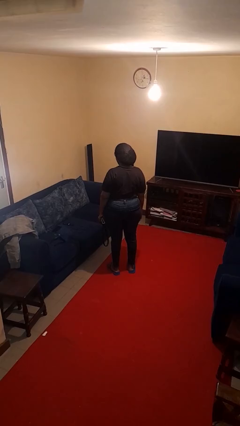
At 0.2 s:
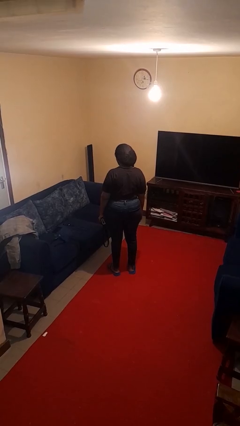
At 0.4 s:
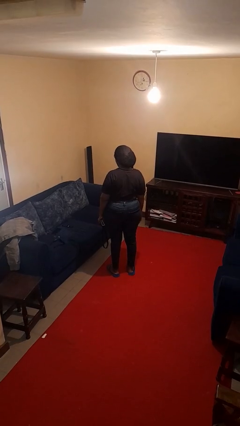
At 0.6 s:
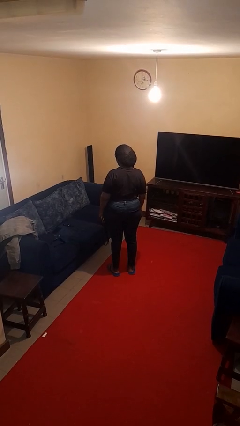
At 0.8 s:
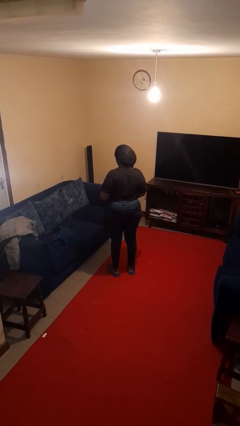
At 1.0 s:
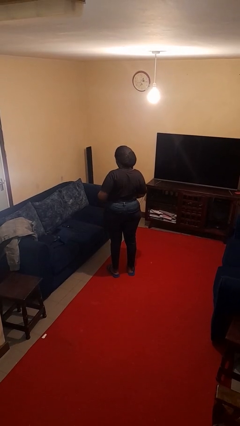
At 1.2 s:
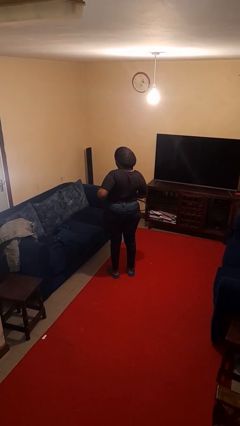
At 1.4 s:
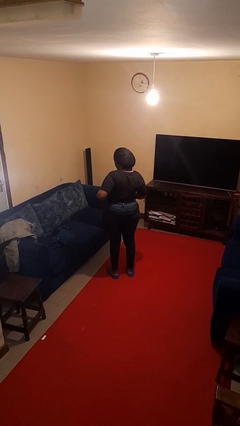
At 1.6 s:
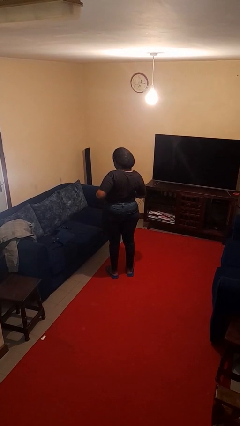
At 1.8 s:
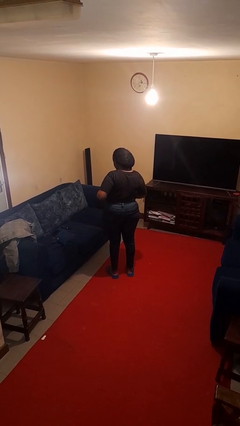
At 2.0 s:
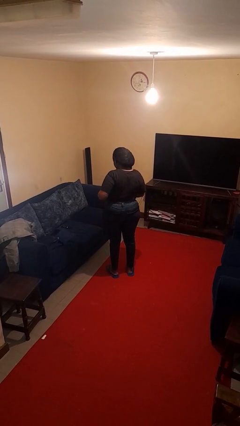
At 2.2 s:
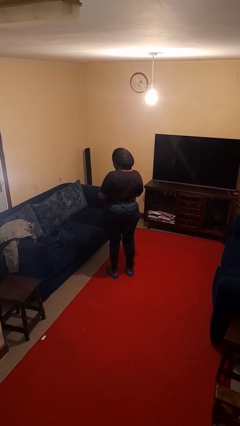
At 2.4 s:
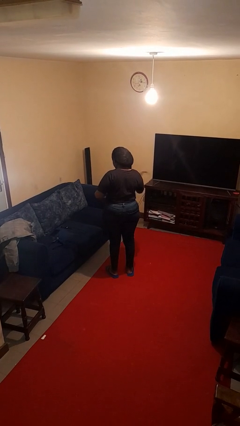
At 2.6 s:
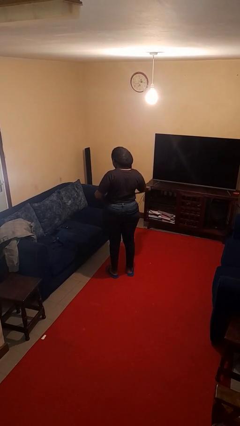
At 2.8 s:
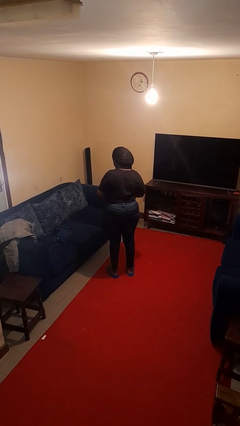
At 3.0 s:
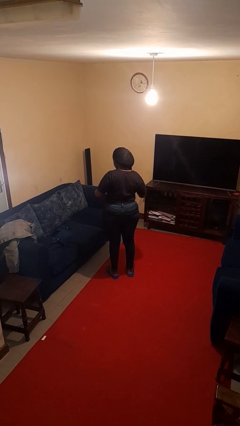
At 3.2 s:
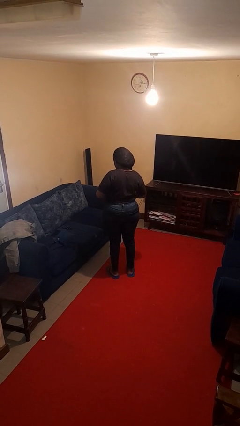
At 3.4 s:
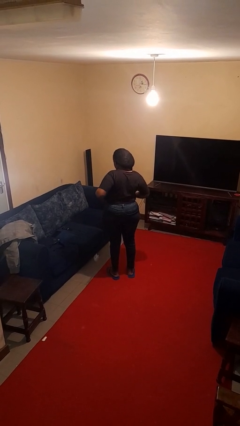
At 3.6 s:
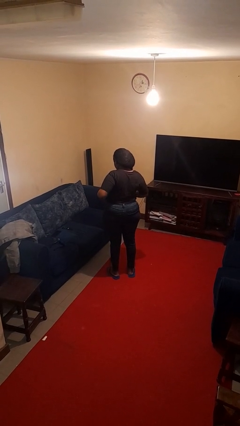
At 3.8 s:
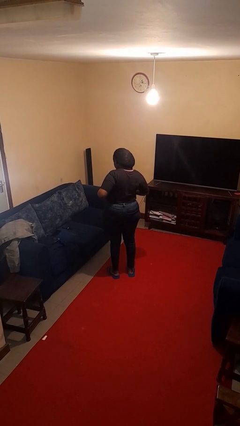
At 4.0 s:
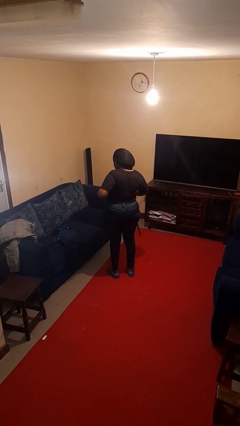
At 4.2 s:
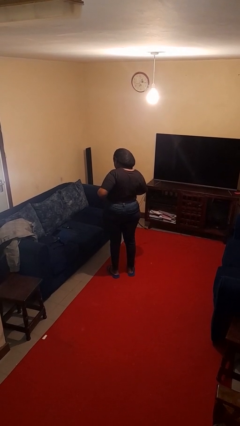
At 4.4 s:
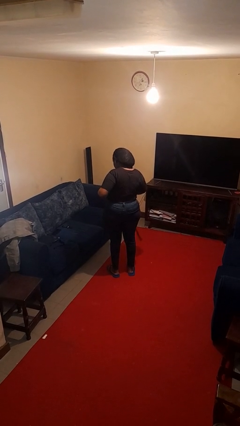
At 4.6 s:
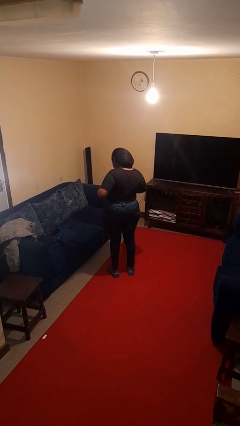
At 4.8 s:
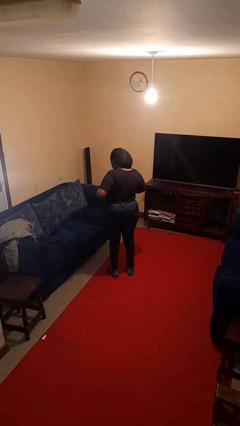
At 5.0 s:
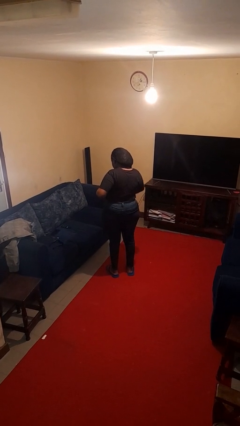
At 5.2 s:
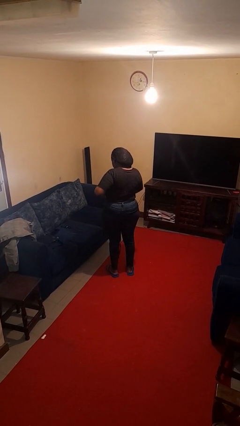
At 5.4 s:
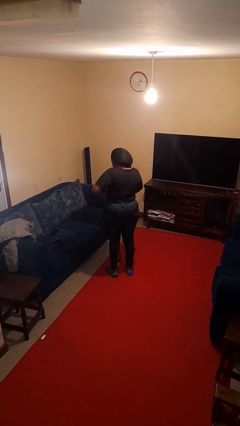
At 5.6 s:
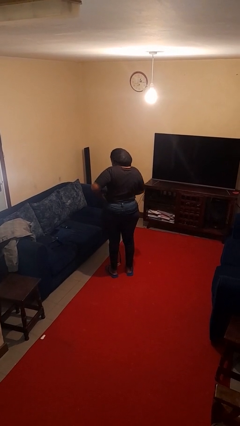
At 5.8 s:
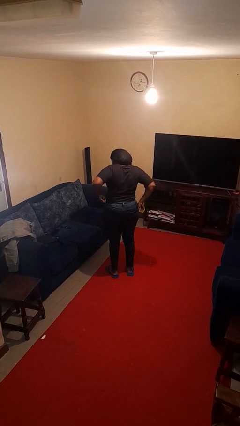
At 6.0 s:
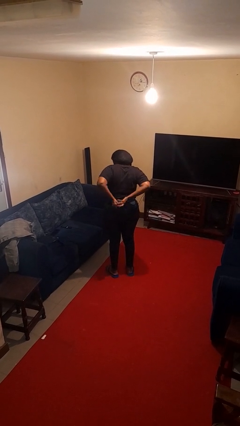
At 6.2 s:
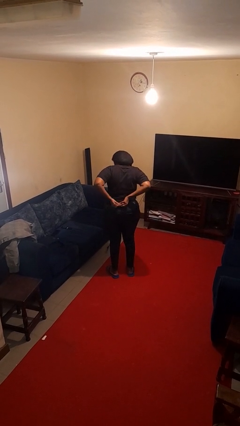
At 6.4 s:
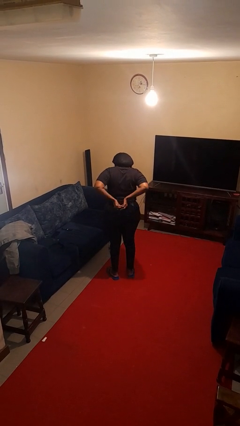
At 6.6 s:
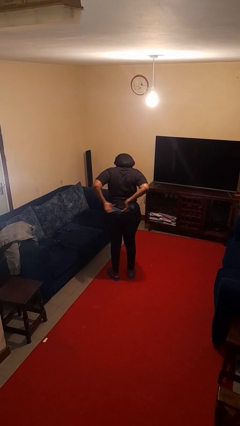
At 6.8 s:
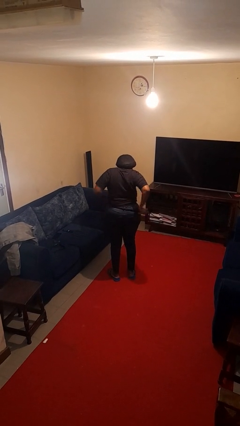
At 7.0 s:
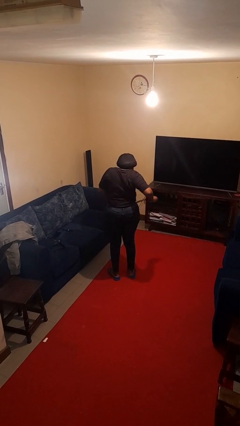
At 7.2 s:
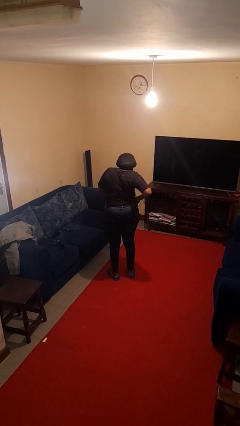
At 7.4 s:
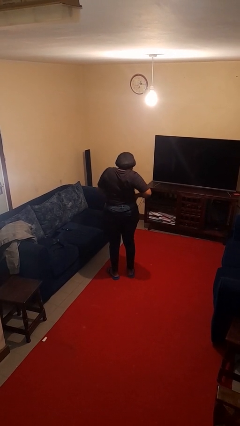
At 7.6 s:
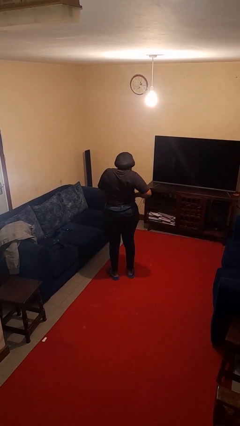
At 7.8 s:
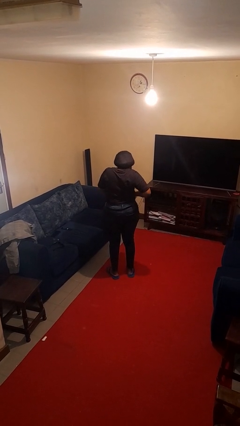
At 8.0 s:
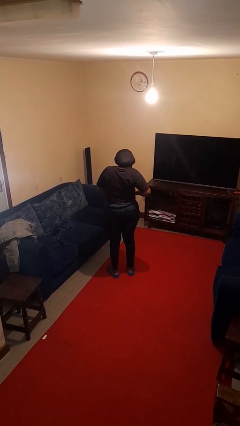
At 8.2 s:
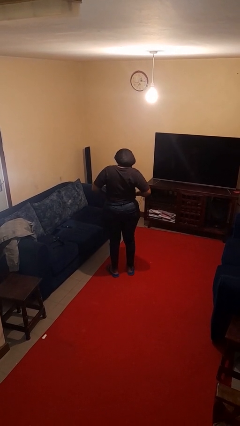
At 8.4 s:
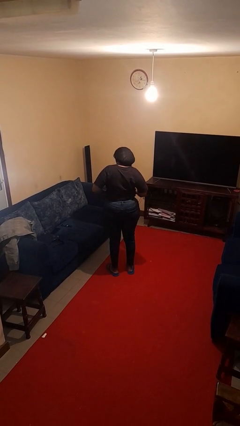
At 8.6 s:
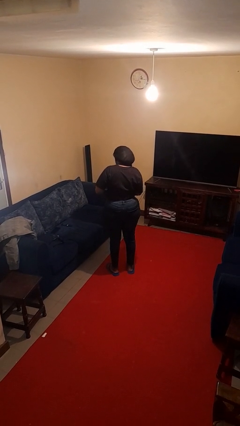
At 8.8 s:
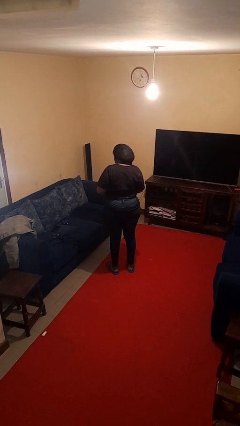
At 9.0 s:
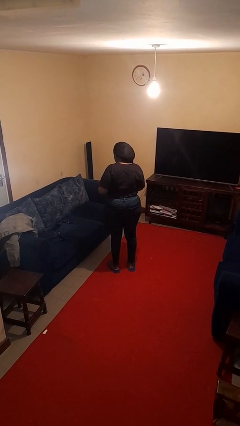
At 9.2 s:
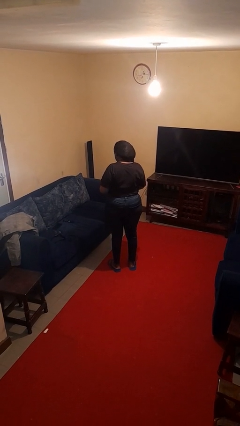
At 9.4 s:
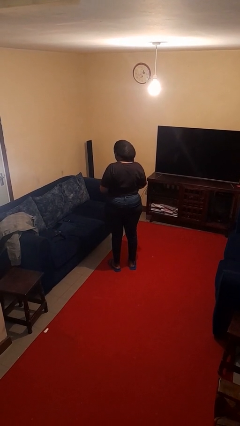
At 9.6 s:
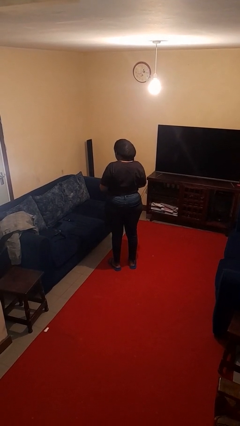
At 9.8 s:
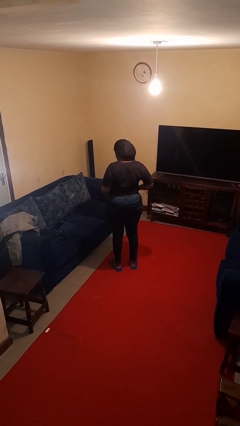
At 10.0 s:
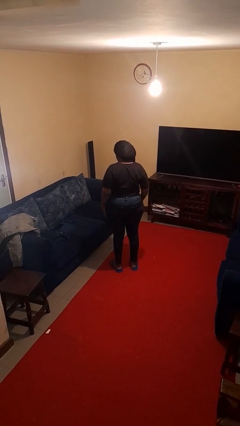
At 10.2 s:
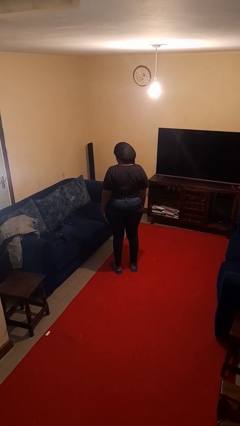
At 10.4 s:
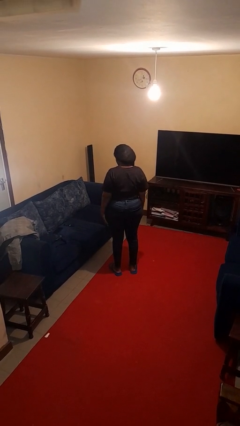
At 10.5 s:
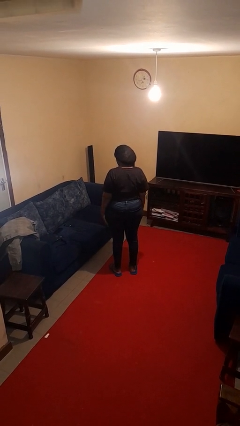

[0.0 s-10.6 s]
person puts on belt

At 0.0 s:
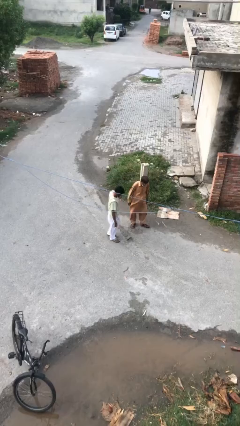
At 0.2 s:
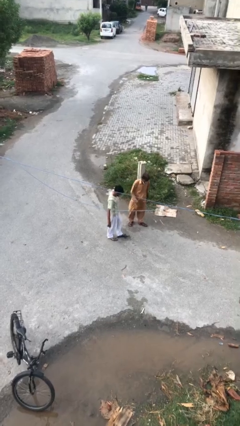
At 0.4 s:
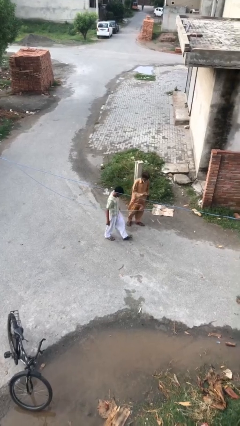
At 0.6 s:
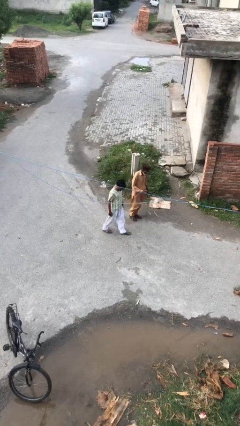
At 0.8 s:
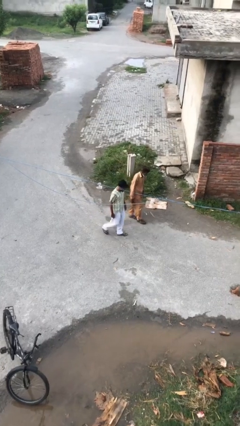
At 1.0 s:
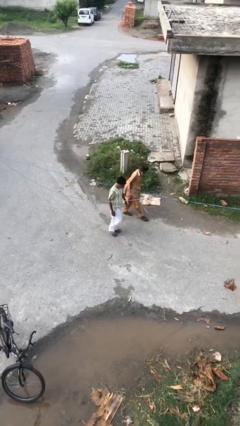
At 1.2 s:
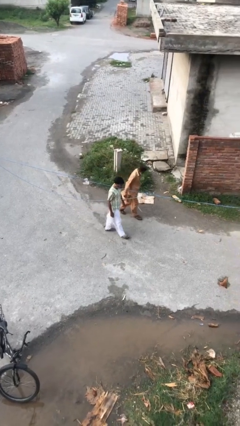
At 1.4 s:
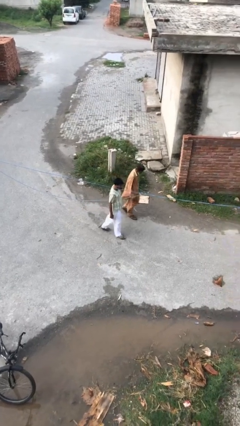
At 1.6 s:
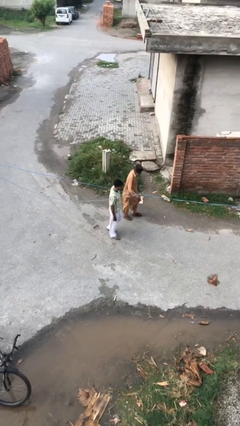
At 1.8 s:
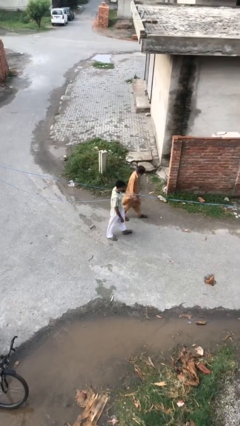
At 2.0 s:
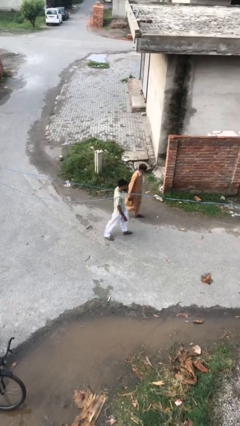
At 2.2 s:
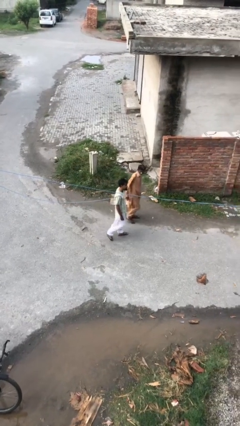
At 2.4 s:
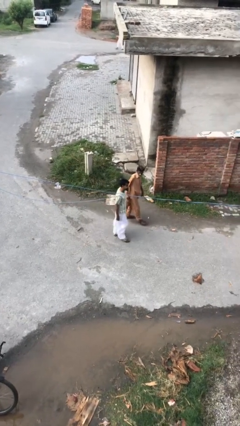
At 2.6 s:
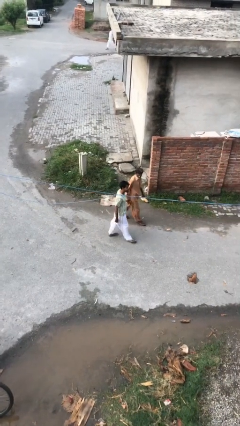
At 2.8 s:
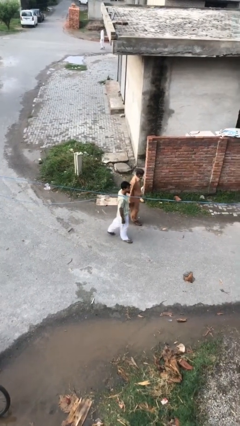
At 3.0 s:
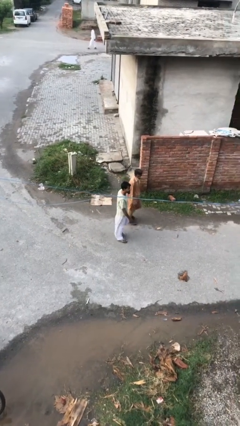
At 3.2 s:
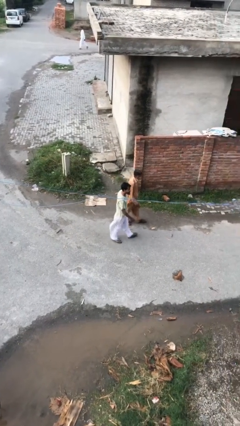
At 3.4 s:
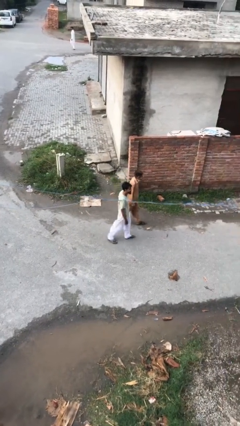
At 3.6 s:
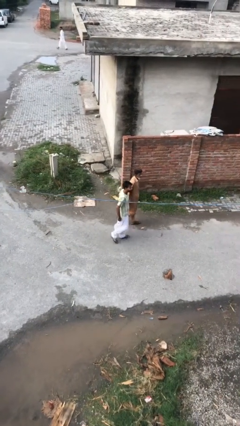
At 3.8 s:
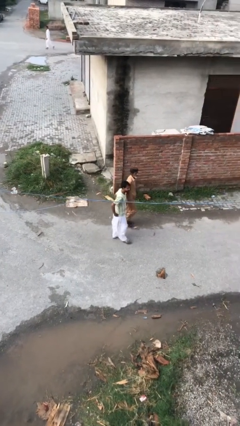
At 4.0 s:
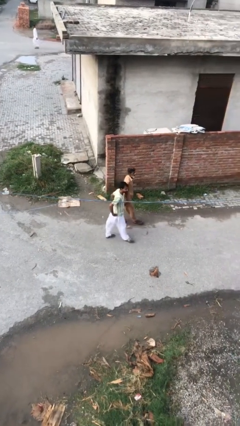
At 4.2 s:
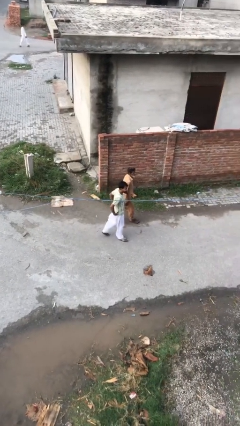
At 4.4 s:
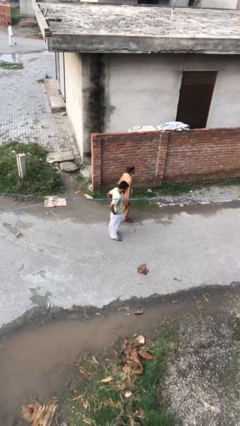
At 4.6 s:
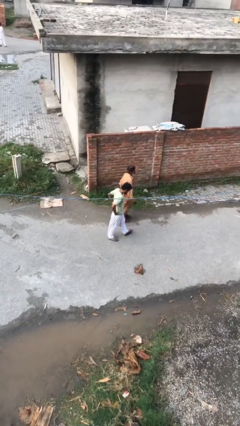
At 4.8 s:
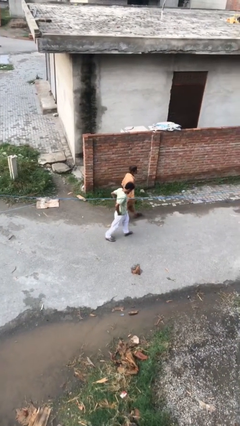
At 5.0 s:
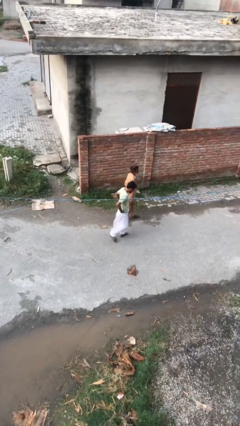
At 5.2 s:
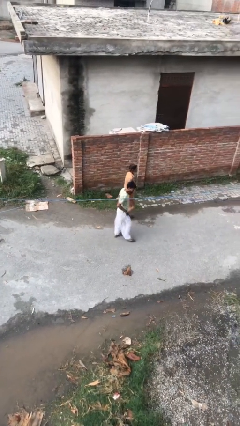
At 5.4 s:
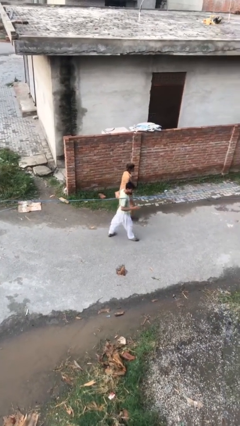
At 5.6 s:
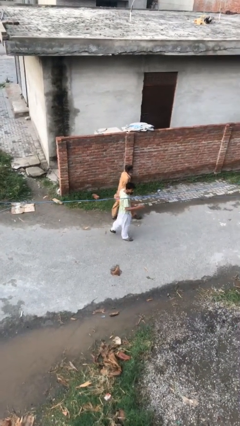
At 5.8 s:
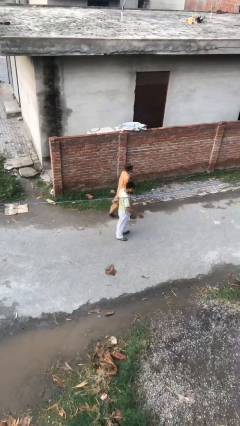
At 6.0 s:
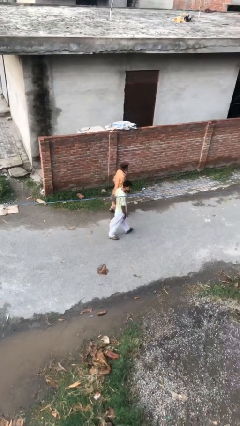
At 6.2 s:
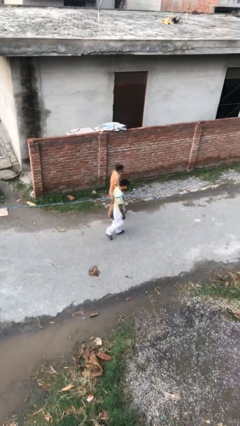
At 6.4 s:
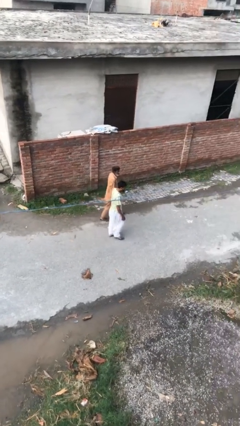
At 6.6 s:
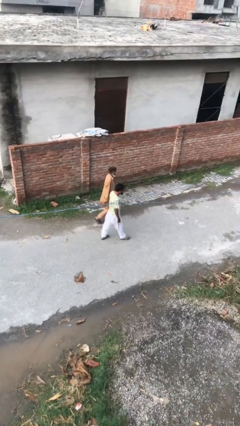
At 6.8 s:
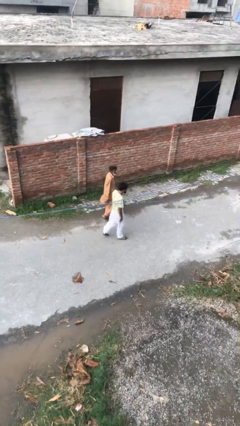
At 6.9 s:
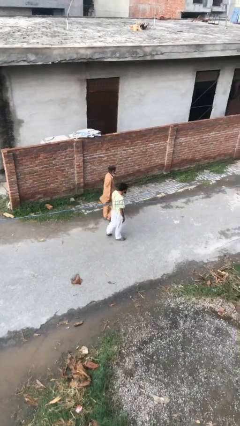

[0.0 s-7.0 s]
person talks to person

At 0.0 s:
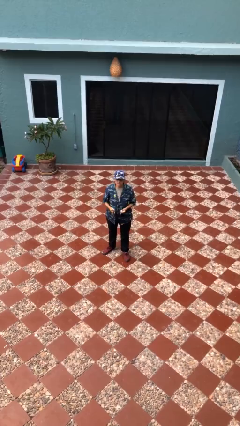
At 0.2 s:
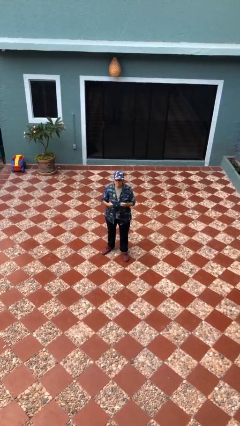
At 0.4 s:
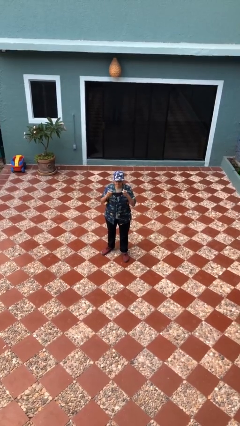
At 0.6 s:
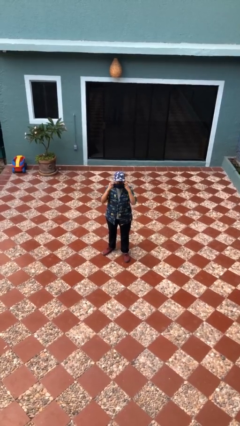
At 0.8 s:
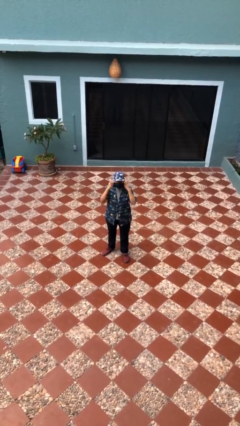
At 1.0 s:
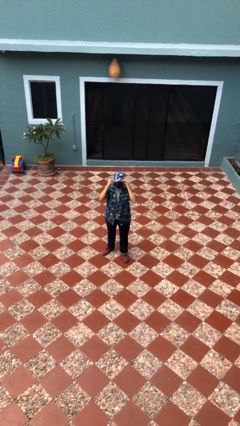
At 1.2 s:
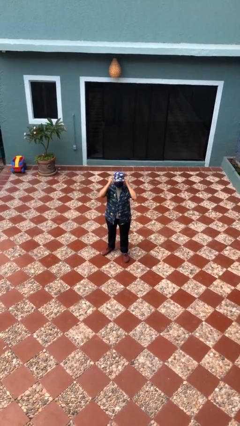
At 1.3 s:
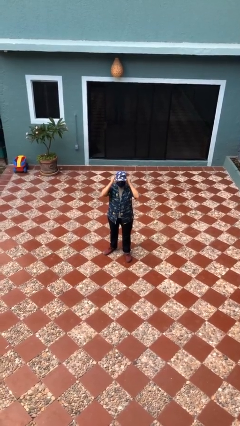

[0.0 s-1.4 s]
person puts on facemask
